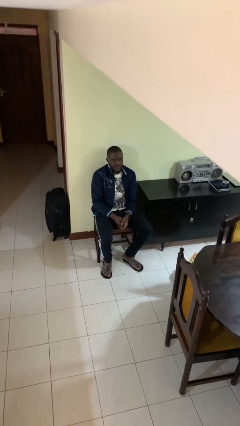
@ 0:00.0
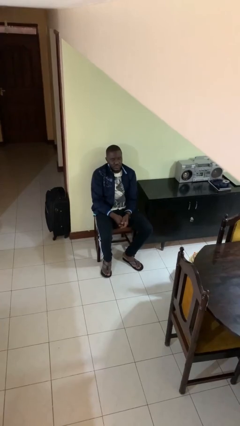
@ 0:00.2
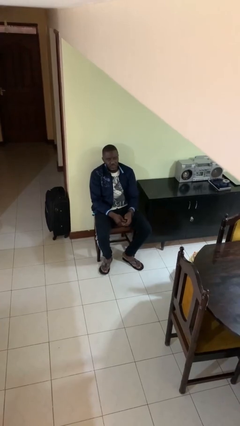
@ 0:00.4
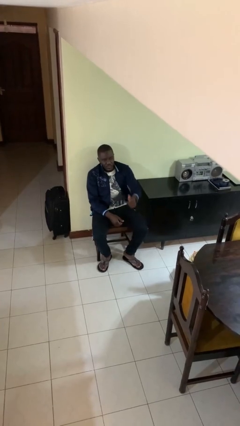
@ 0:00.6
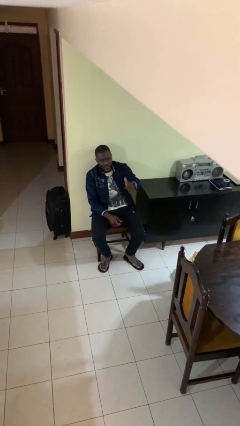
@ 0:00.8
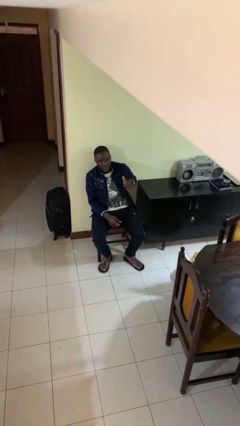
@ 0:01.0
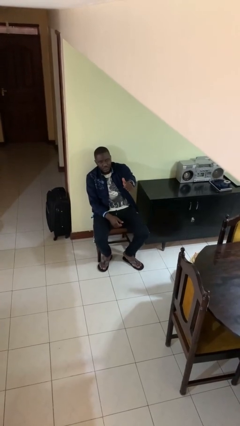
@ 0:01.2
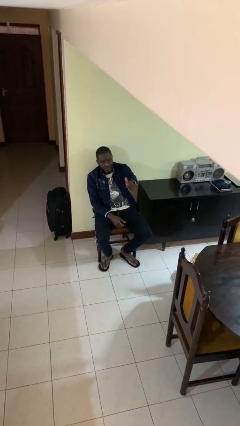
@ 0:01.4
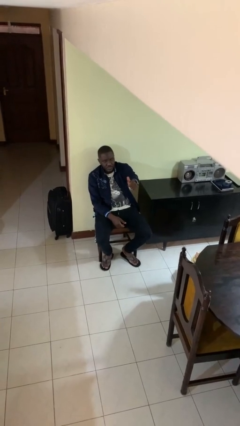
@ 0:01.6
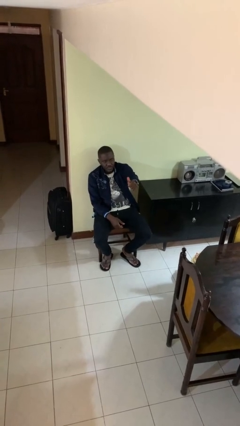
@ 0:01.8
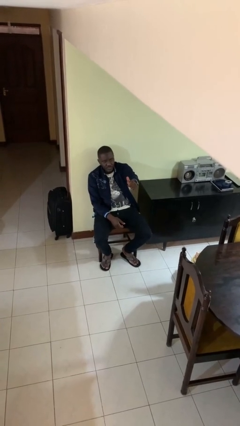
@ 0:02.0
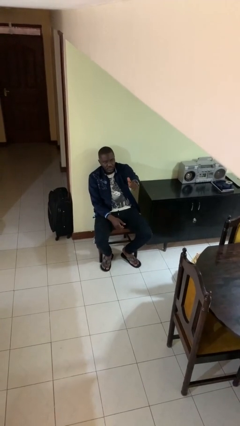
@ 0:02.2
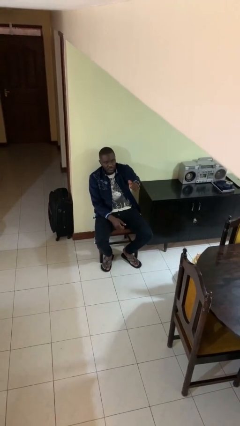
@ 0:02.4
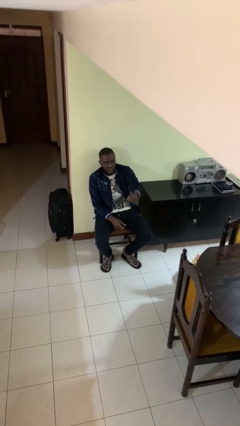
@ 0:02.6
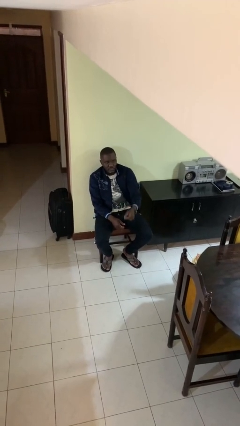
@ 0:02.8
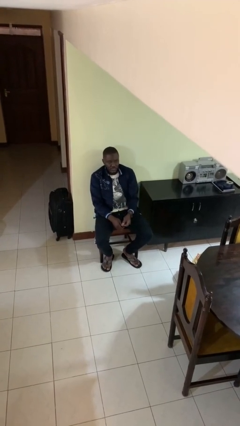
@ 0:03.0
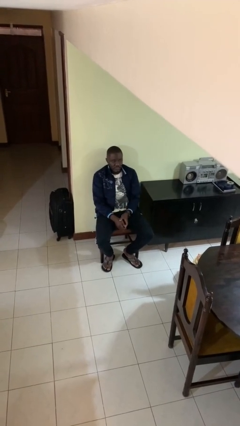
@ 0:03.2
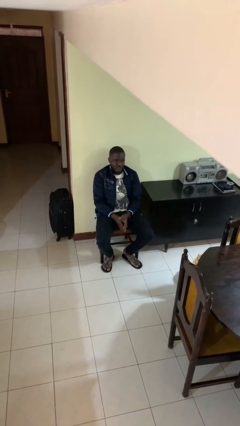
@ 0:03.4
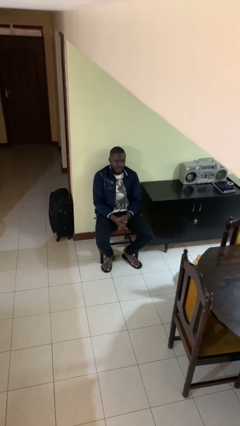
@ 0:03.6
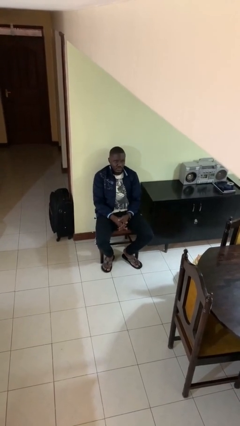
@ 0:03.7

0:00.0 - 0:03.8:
person gestures thumbs up

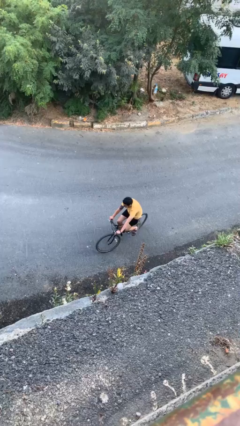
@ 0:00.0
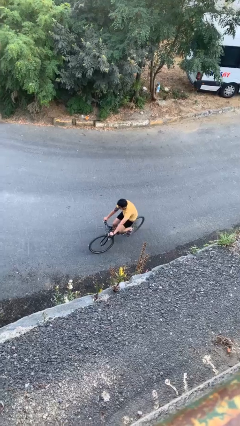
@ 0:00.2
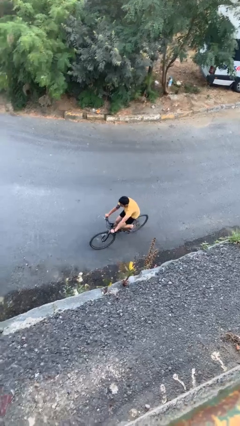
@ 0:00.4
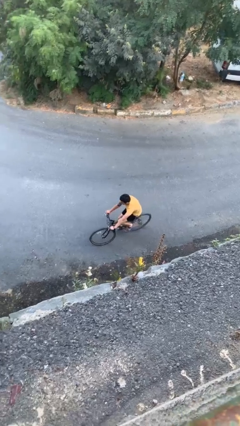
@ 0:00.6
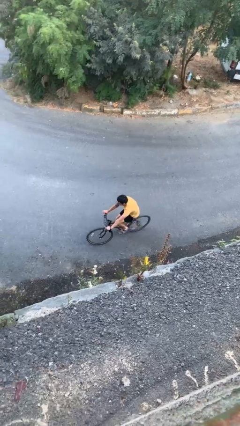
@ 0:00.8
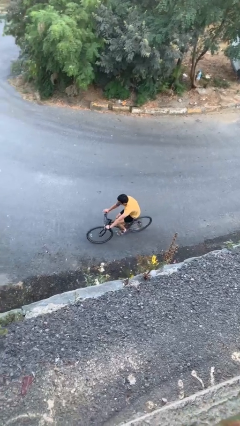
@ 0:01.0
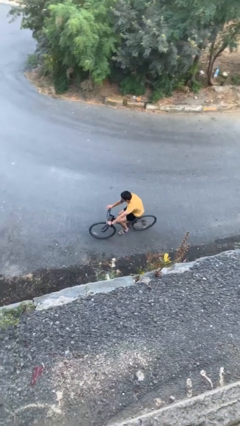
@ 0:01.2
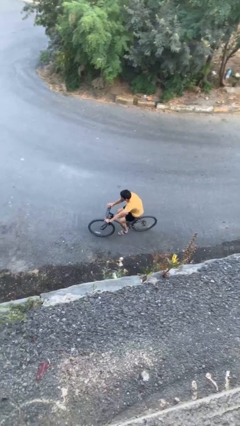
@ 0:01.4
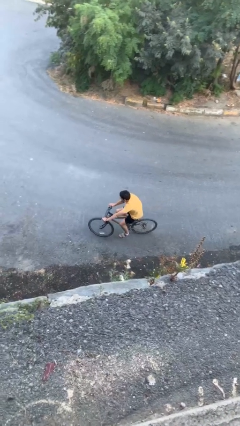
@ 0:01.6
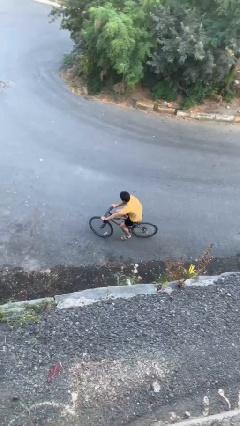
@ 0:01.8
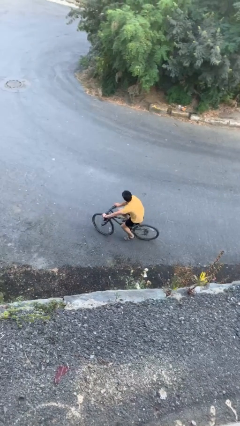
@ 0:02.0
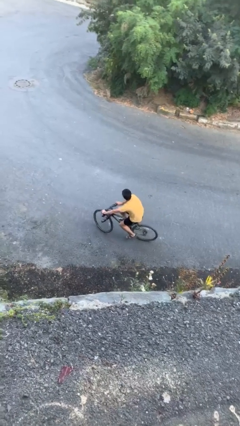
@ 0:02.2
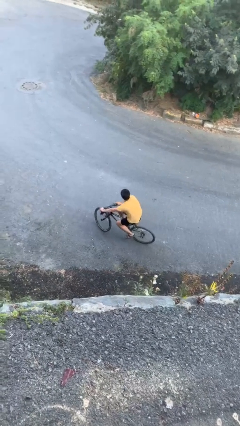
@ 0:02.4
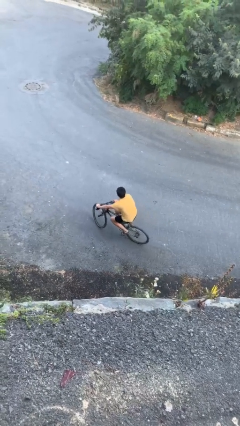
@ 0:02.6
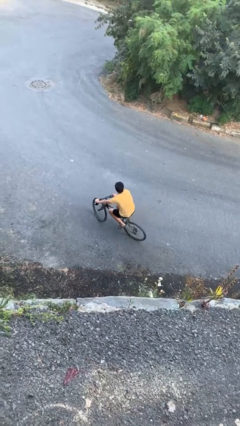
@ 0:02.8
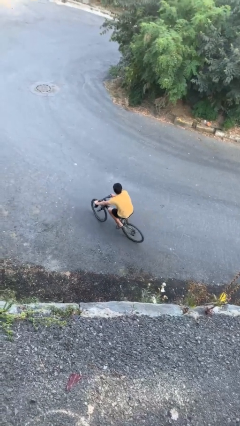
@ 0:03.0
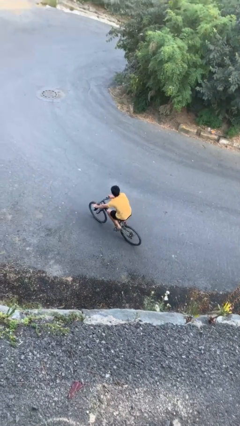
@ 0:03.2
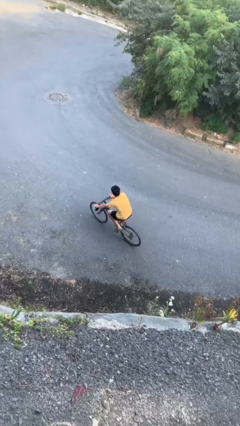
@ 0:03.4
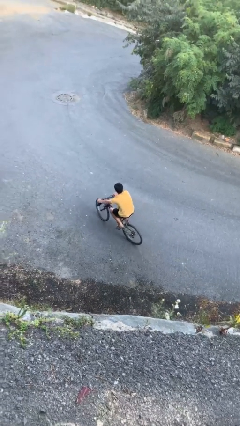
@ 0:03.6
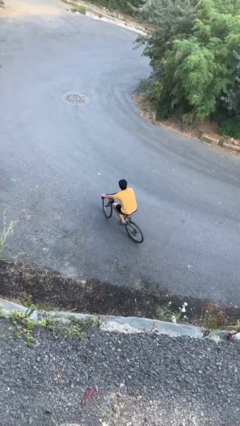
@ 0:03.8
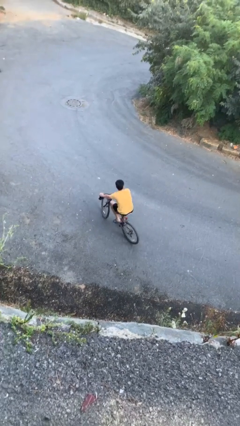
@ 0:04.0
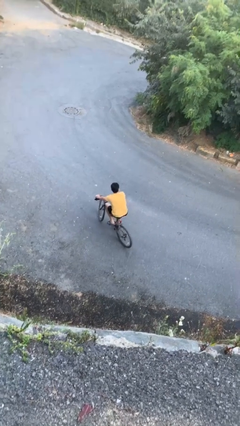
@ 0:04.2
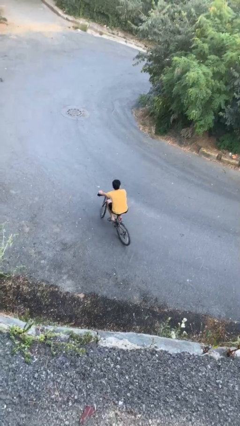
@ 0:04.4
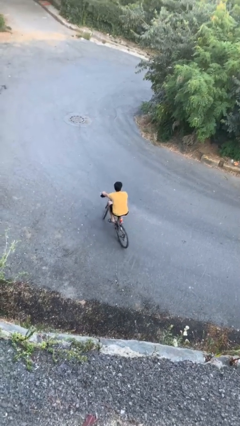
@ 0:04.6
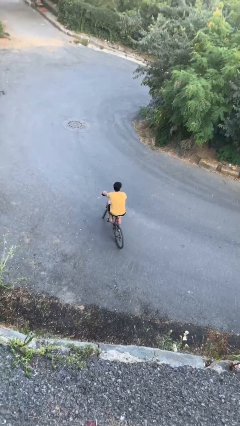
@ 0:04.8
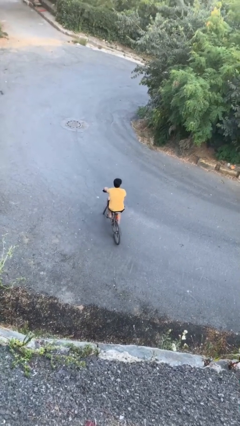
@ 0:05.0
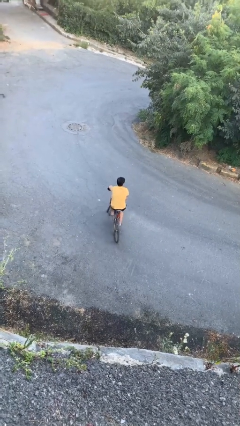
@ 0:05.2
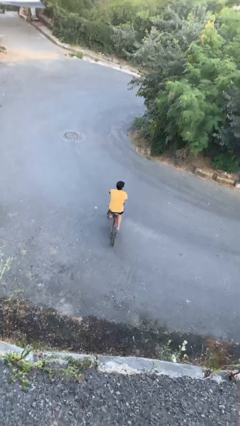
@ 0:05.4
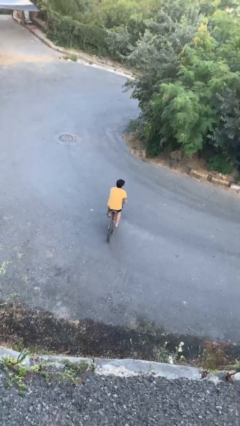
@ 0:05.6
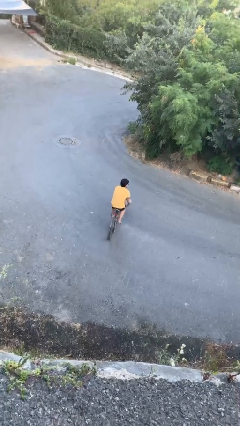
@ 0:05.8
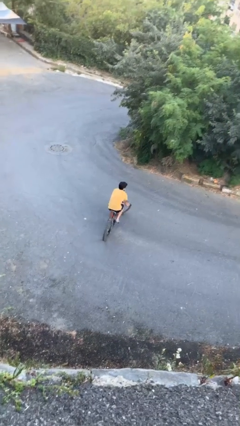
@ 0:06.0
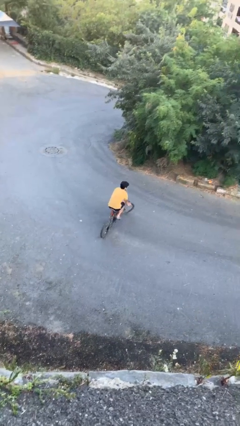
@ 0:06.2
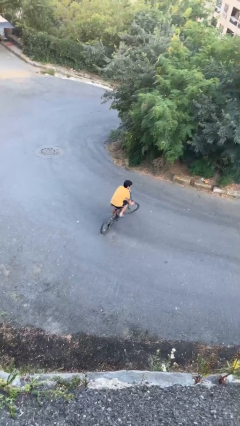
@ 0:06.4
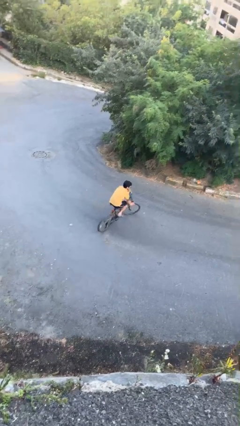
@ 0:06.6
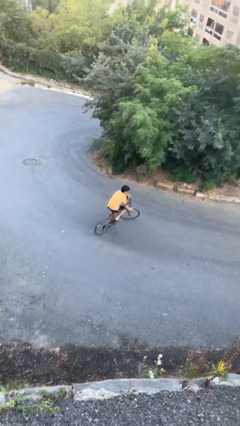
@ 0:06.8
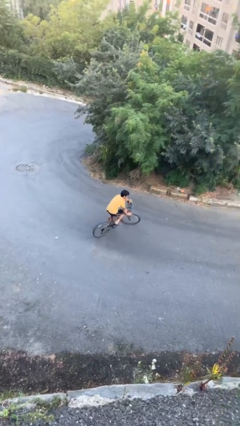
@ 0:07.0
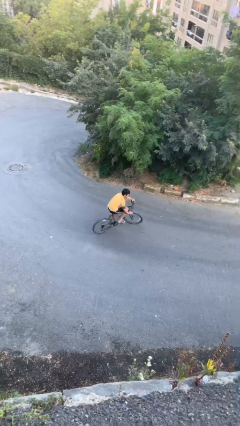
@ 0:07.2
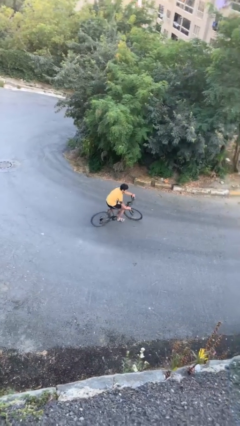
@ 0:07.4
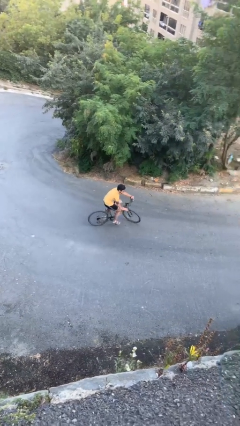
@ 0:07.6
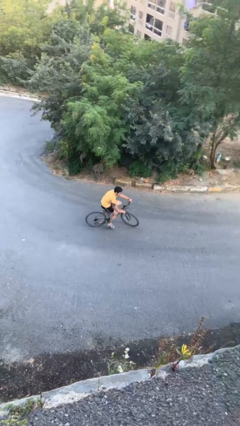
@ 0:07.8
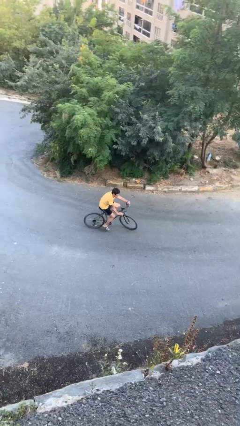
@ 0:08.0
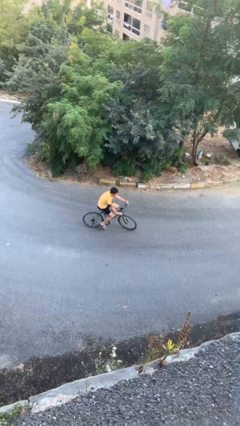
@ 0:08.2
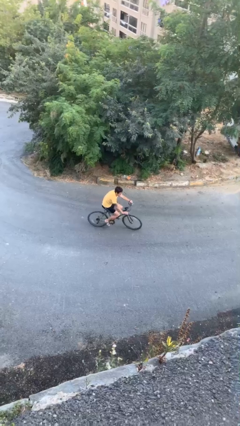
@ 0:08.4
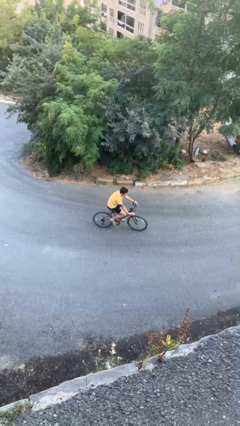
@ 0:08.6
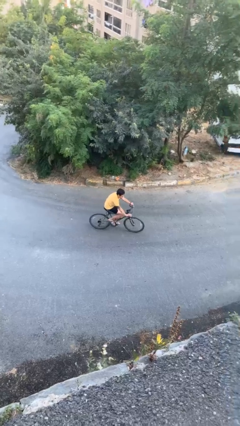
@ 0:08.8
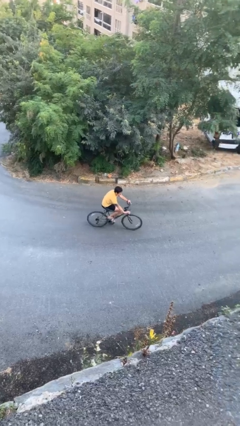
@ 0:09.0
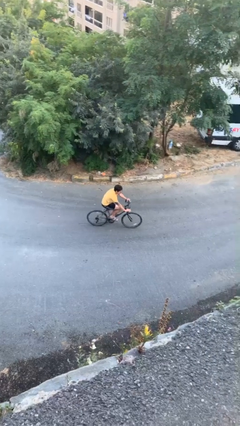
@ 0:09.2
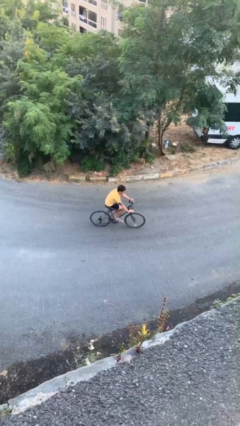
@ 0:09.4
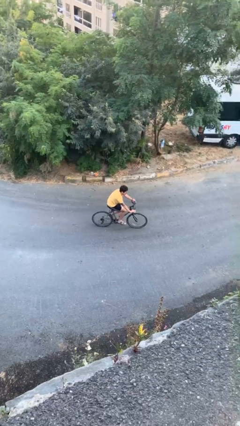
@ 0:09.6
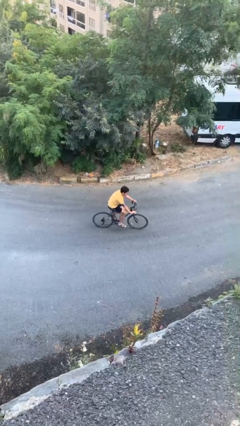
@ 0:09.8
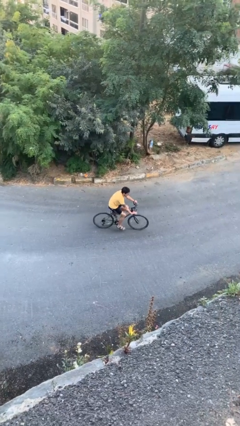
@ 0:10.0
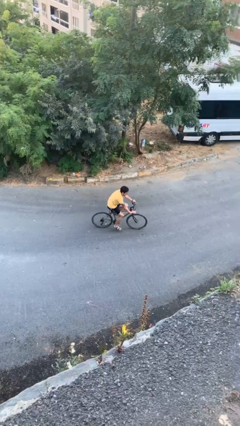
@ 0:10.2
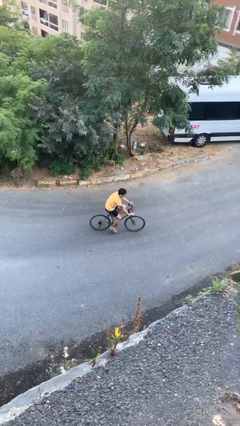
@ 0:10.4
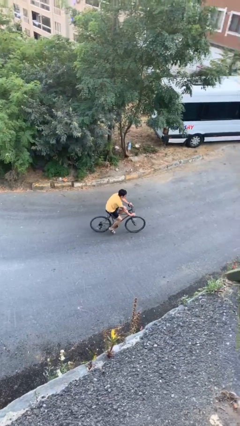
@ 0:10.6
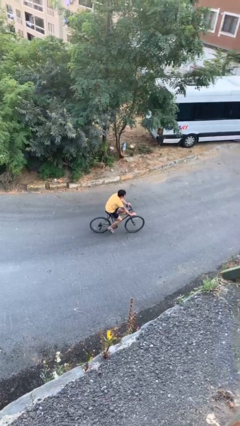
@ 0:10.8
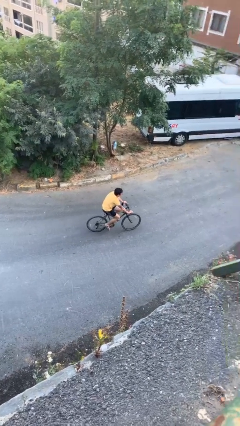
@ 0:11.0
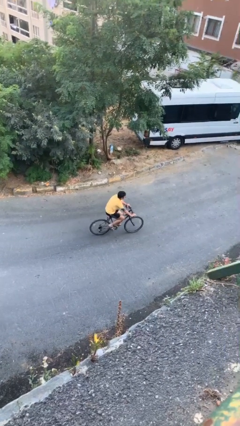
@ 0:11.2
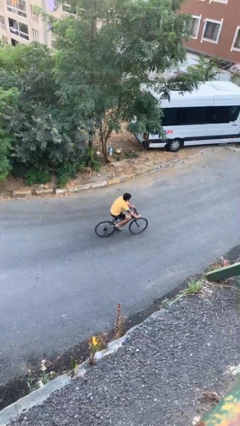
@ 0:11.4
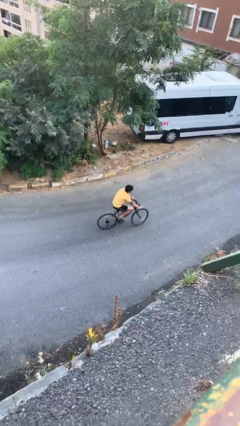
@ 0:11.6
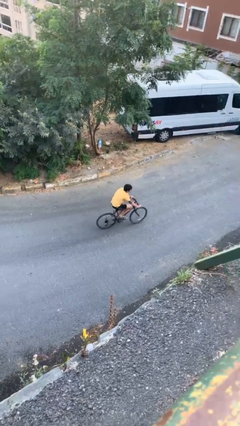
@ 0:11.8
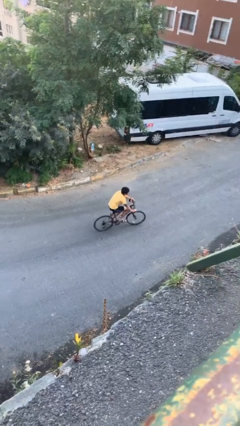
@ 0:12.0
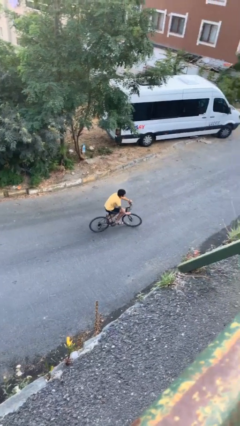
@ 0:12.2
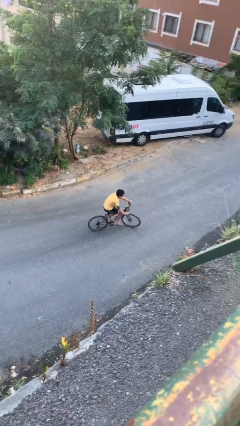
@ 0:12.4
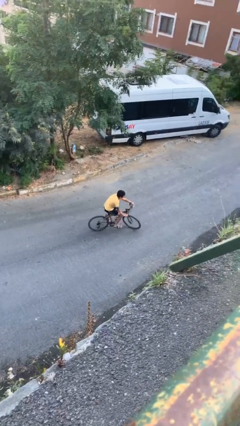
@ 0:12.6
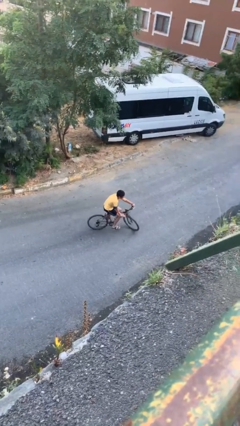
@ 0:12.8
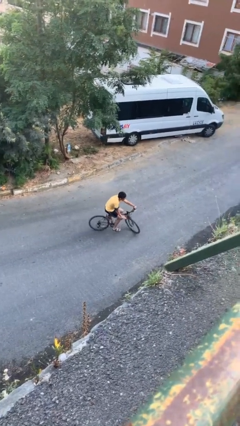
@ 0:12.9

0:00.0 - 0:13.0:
person rides bicycle

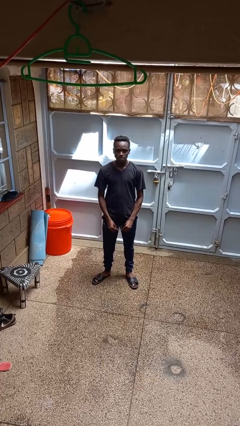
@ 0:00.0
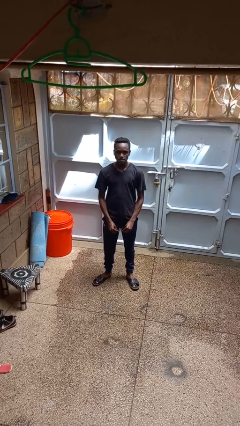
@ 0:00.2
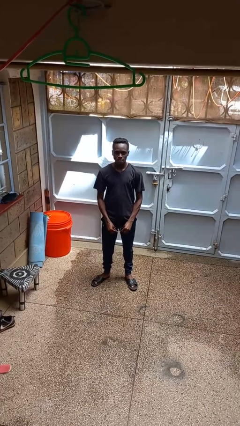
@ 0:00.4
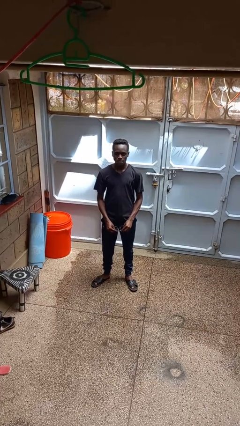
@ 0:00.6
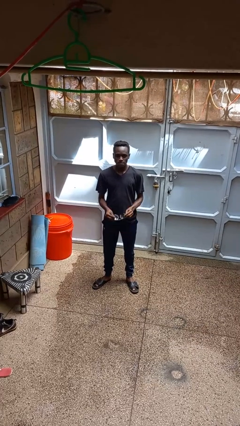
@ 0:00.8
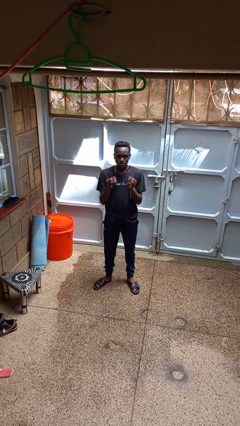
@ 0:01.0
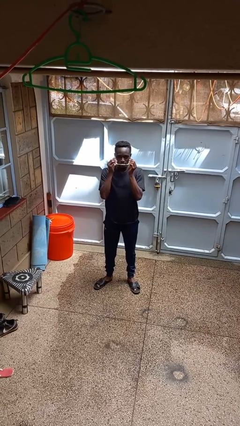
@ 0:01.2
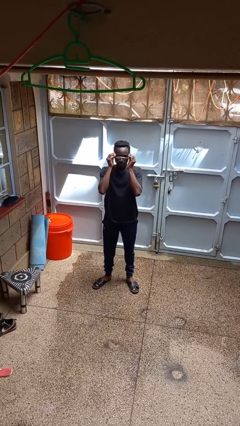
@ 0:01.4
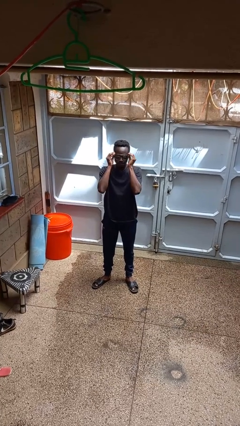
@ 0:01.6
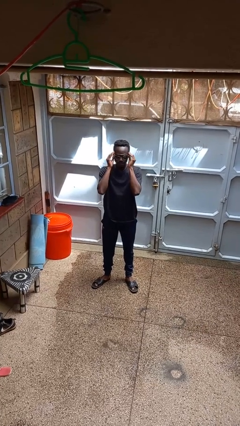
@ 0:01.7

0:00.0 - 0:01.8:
person puts on sunglasses
